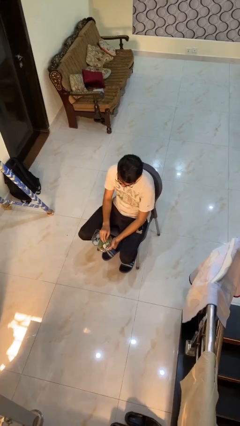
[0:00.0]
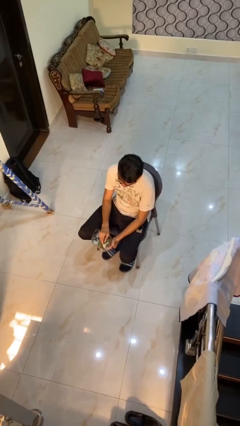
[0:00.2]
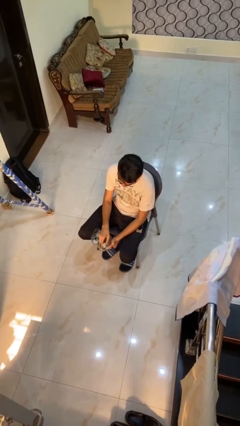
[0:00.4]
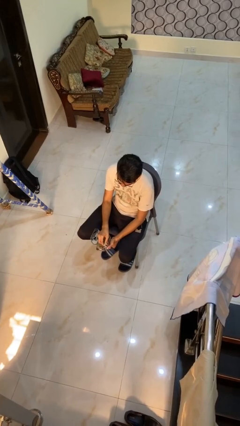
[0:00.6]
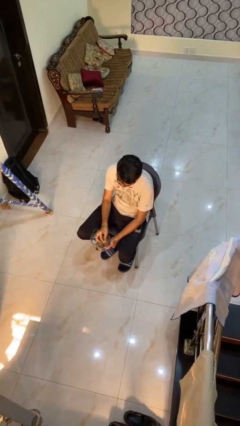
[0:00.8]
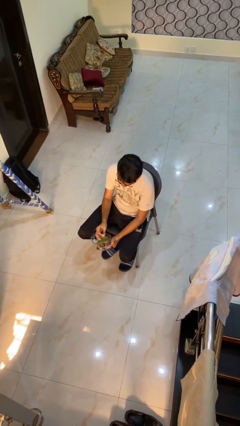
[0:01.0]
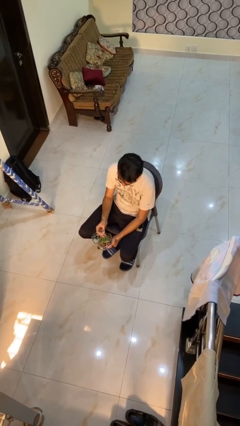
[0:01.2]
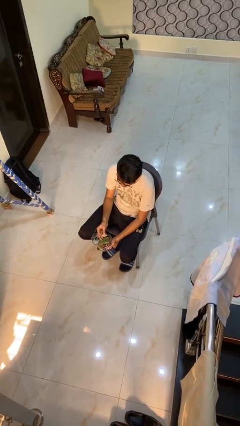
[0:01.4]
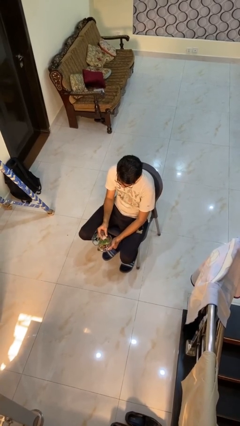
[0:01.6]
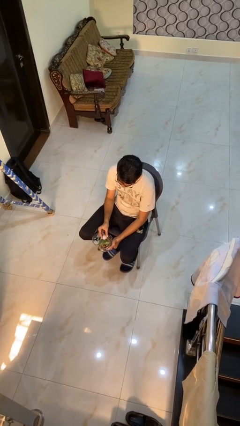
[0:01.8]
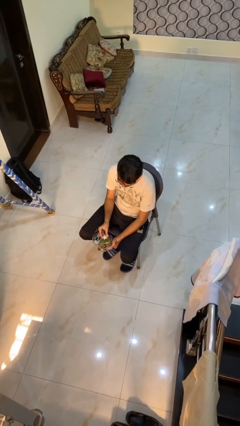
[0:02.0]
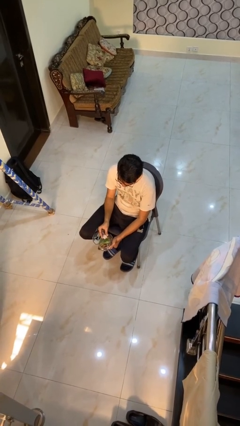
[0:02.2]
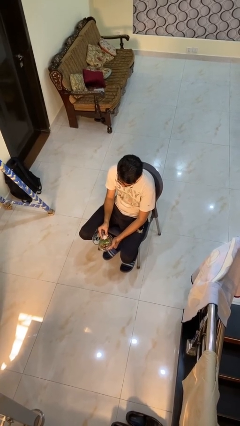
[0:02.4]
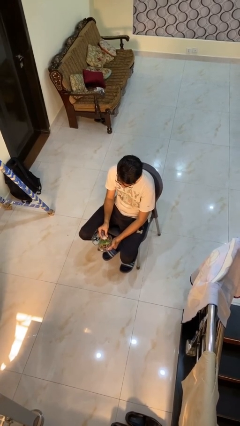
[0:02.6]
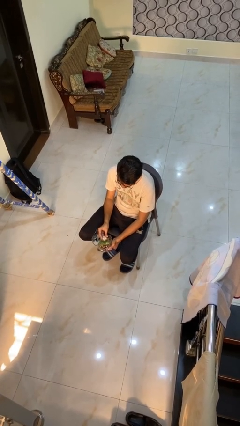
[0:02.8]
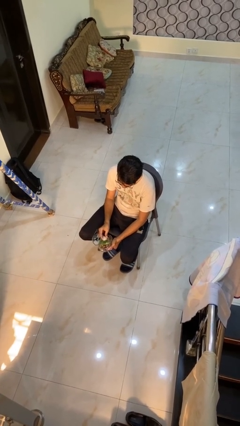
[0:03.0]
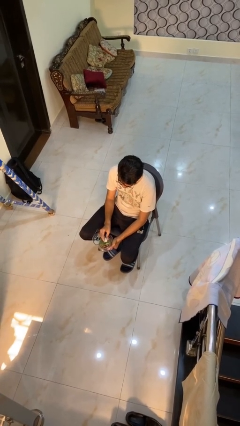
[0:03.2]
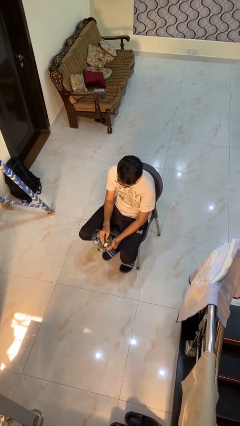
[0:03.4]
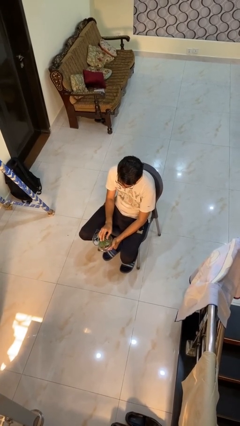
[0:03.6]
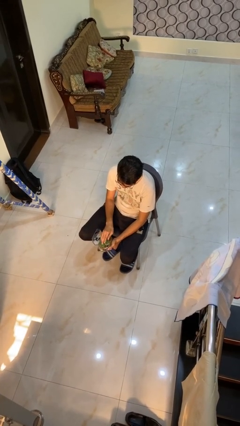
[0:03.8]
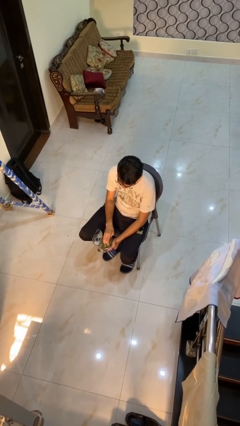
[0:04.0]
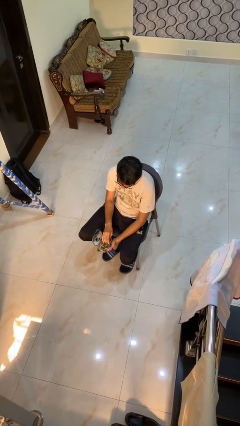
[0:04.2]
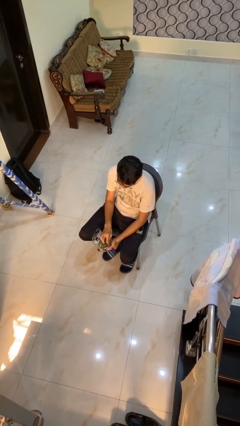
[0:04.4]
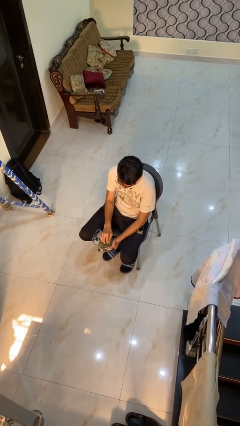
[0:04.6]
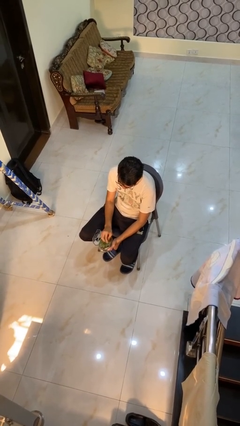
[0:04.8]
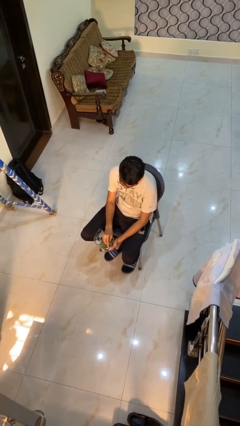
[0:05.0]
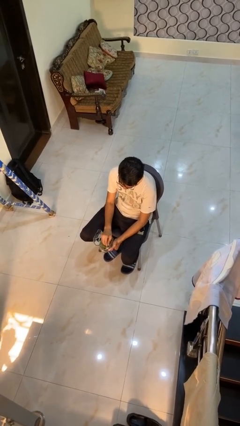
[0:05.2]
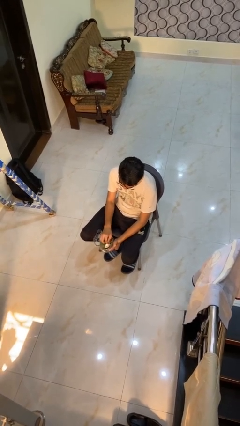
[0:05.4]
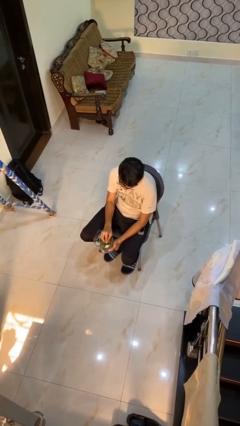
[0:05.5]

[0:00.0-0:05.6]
person searches jewelry box

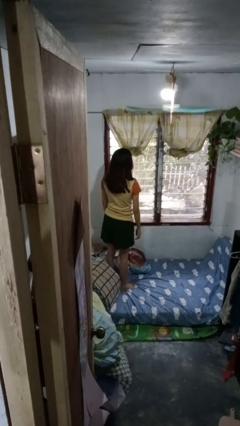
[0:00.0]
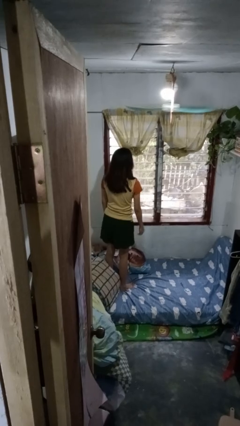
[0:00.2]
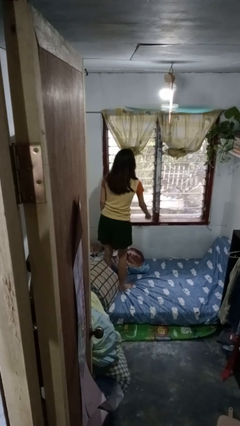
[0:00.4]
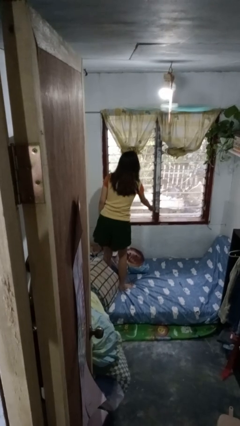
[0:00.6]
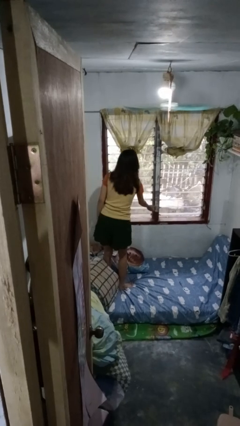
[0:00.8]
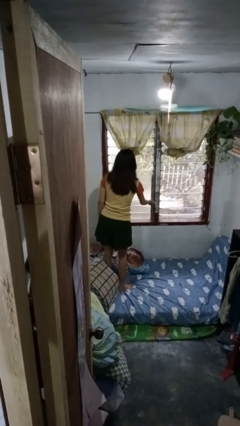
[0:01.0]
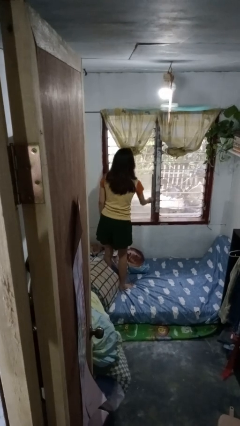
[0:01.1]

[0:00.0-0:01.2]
person closes home window

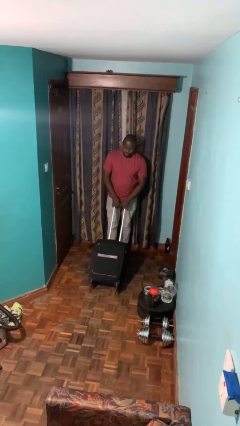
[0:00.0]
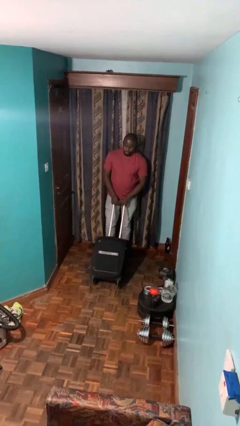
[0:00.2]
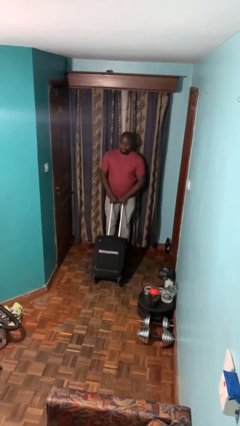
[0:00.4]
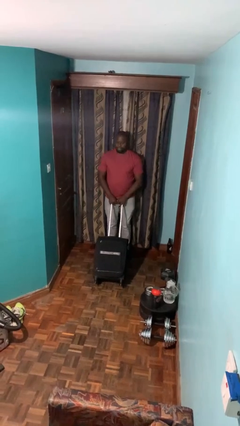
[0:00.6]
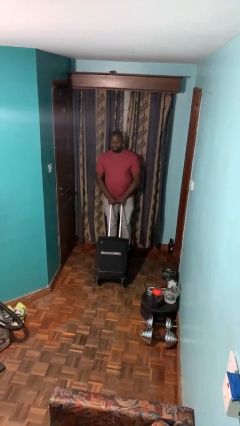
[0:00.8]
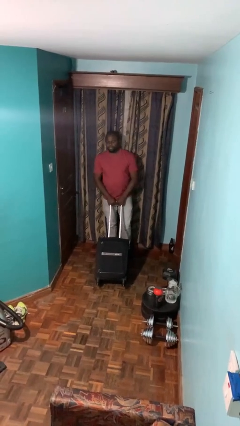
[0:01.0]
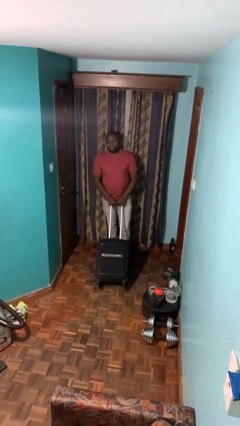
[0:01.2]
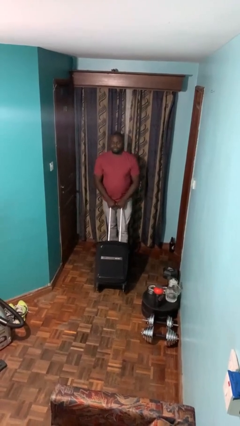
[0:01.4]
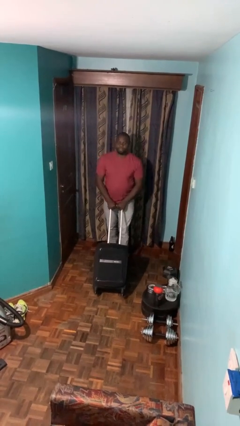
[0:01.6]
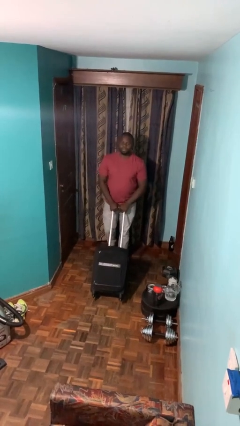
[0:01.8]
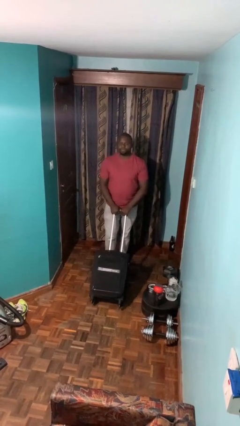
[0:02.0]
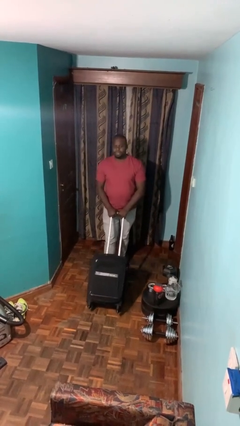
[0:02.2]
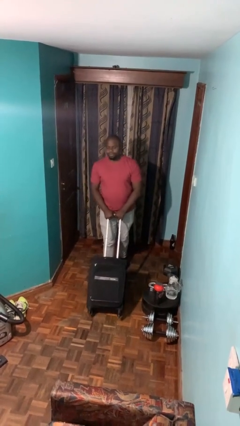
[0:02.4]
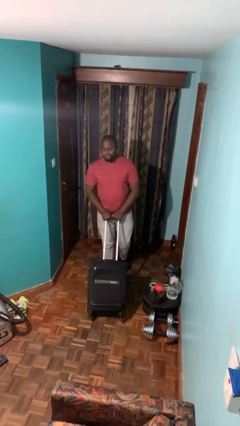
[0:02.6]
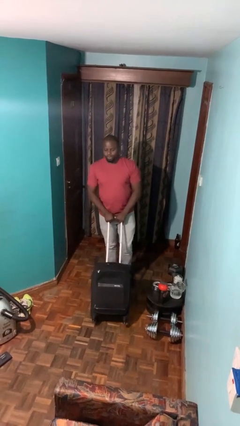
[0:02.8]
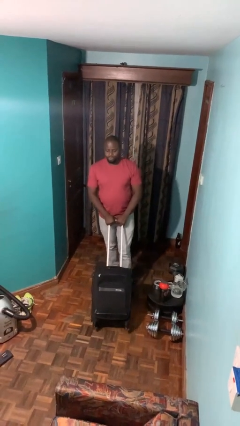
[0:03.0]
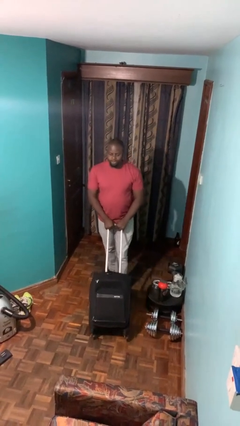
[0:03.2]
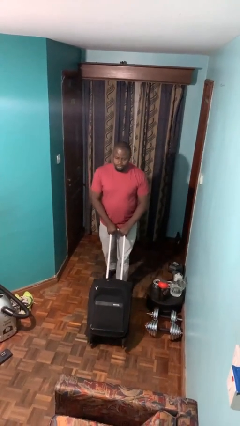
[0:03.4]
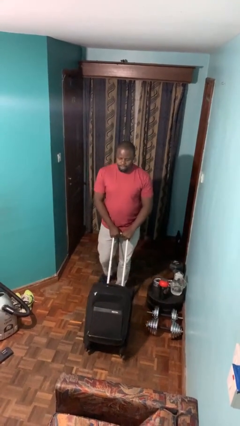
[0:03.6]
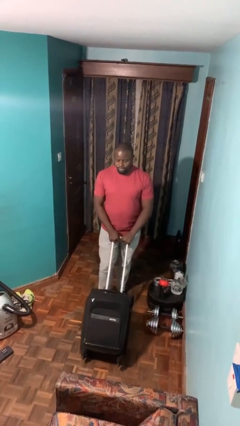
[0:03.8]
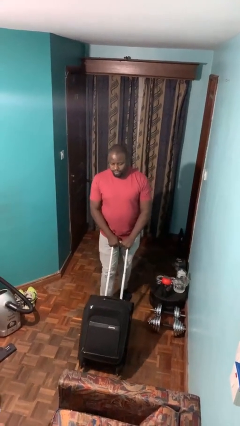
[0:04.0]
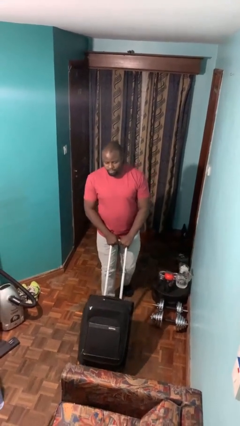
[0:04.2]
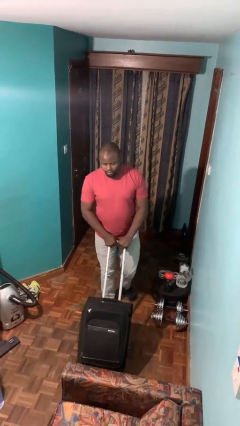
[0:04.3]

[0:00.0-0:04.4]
person pushes wheeled cart

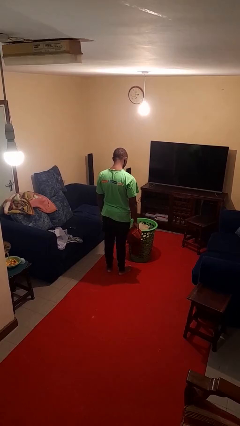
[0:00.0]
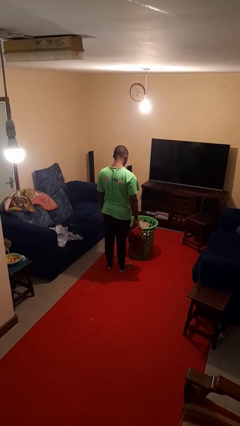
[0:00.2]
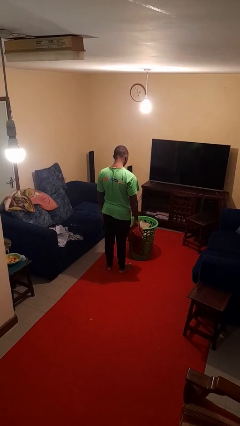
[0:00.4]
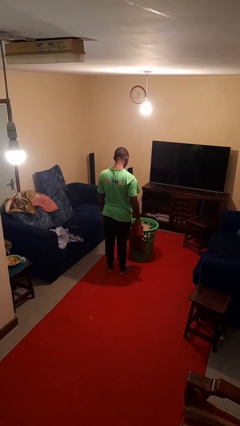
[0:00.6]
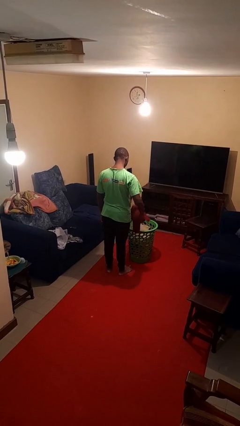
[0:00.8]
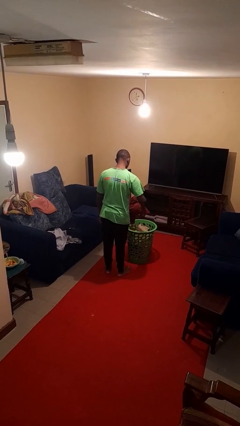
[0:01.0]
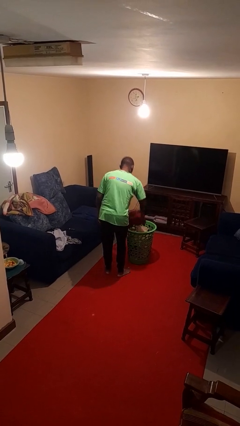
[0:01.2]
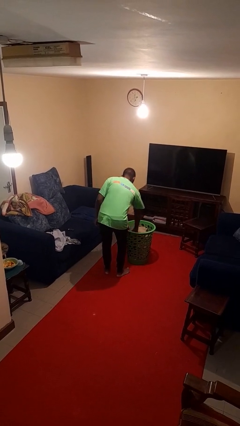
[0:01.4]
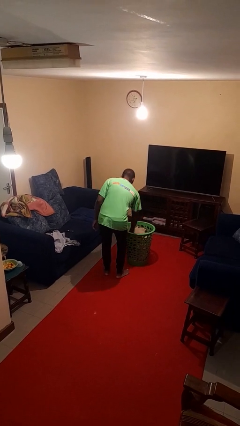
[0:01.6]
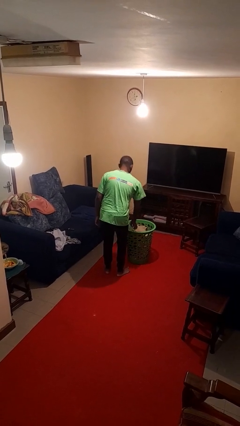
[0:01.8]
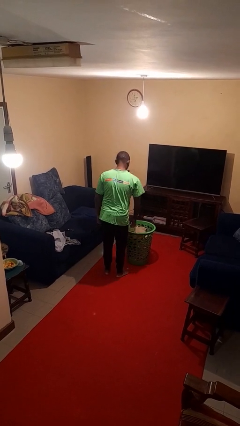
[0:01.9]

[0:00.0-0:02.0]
person puts object into basket

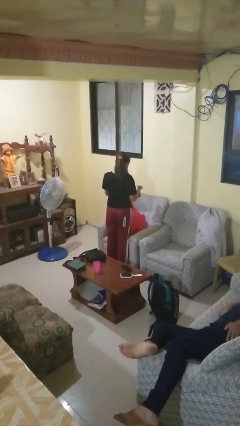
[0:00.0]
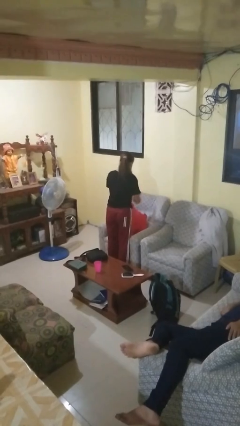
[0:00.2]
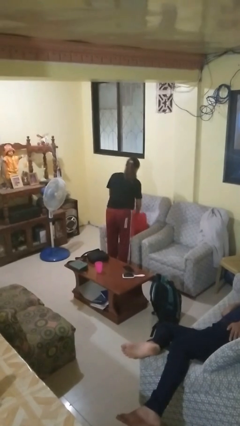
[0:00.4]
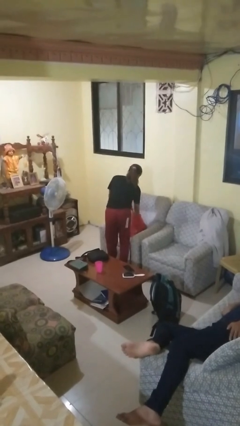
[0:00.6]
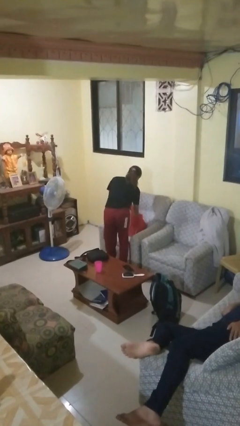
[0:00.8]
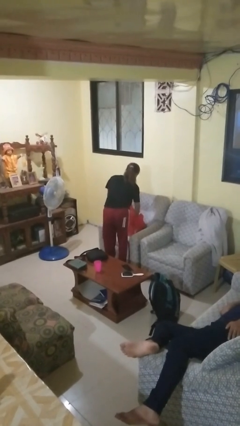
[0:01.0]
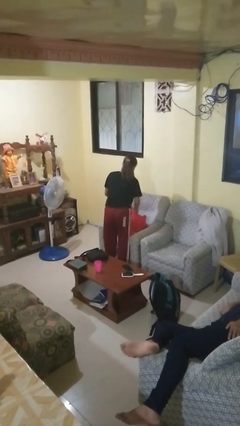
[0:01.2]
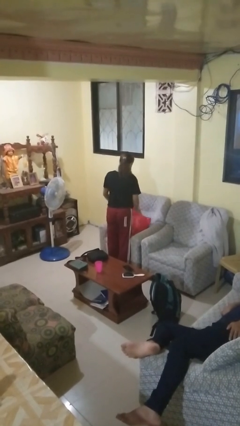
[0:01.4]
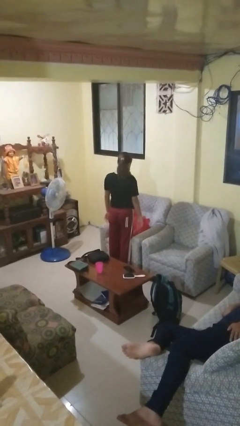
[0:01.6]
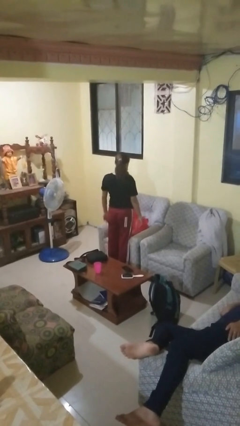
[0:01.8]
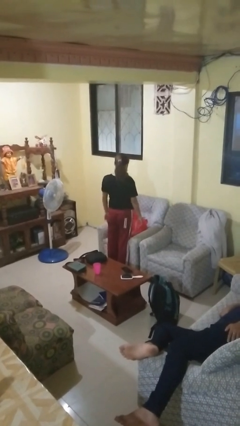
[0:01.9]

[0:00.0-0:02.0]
person puts object into bag

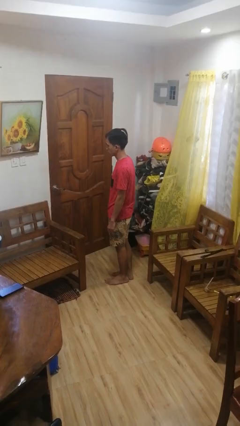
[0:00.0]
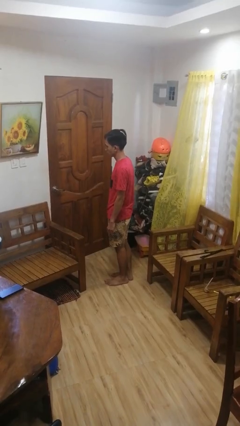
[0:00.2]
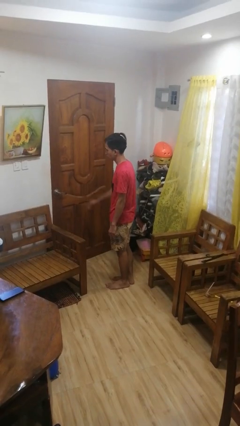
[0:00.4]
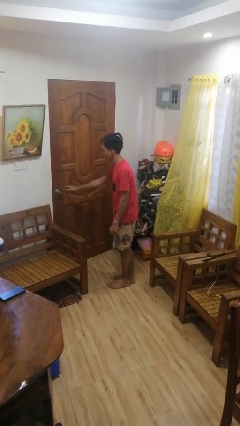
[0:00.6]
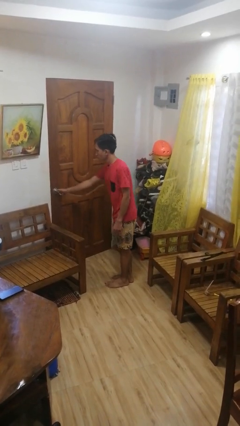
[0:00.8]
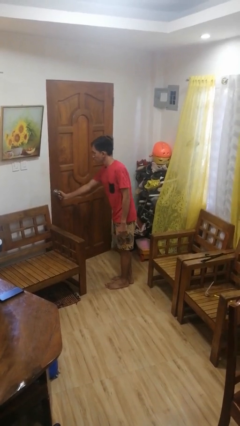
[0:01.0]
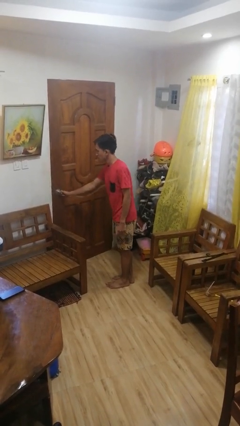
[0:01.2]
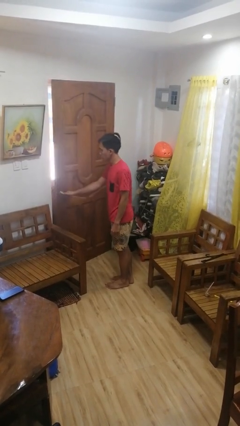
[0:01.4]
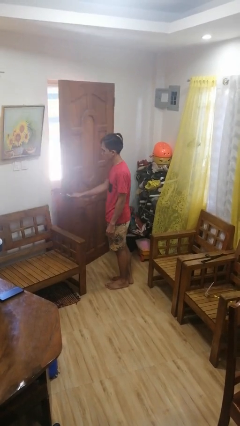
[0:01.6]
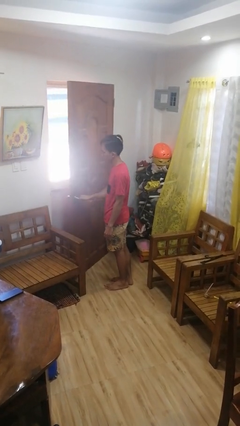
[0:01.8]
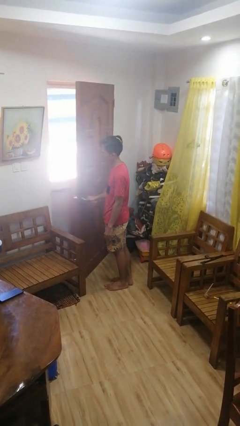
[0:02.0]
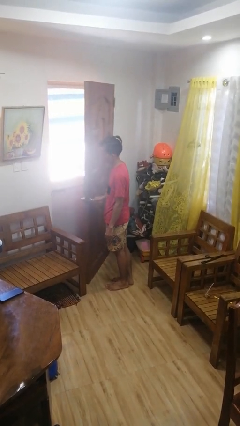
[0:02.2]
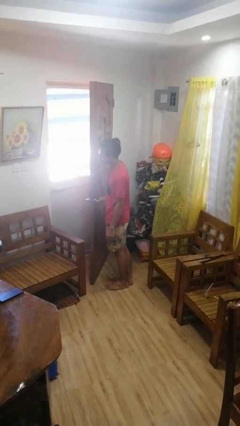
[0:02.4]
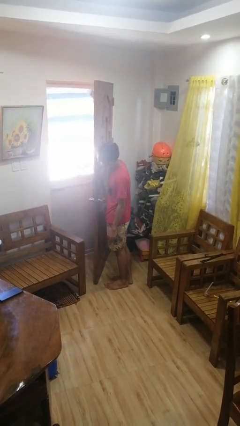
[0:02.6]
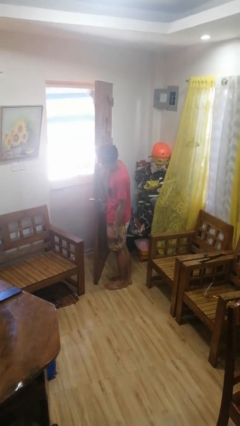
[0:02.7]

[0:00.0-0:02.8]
person opens facility door
